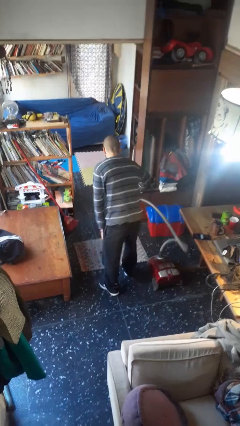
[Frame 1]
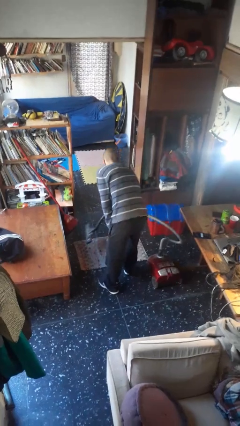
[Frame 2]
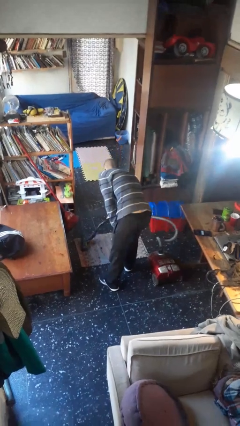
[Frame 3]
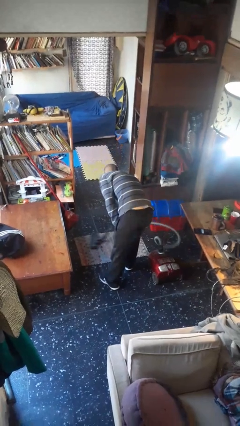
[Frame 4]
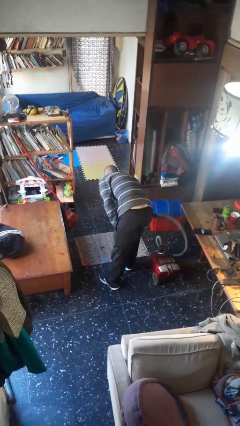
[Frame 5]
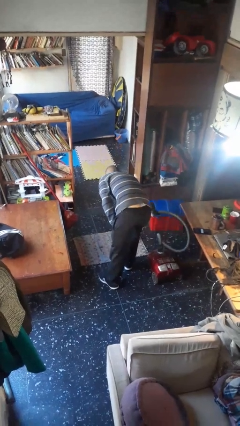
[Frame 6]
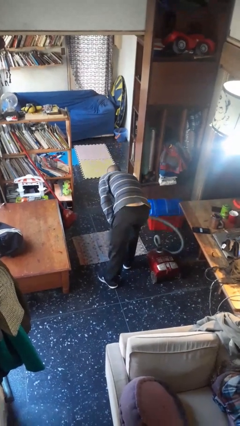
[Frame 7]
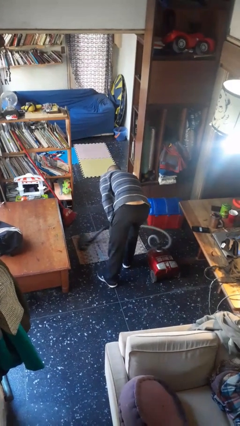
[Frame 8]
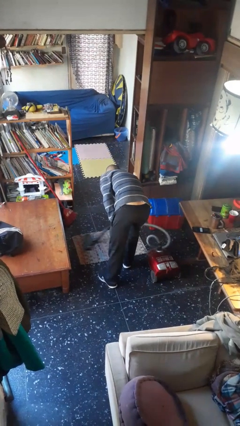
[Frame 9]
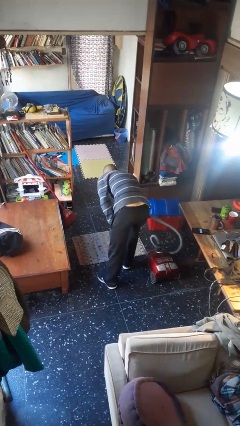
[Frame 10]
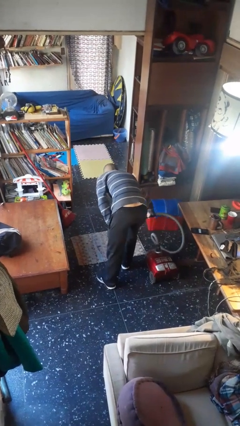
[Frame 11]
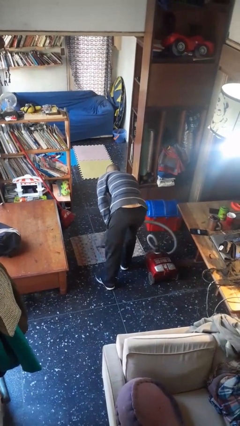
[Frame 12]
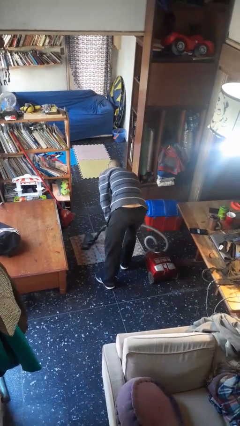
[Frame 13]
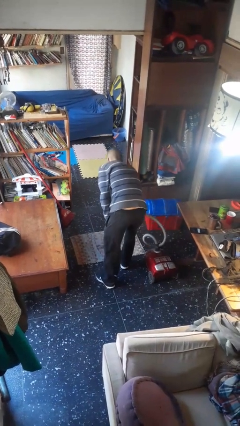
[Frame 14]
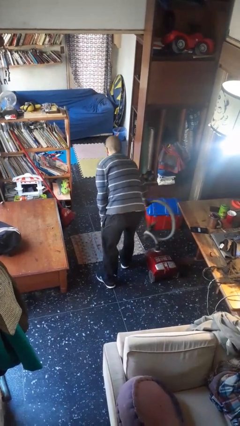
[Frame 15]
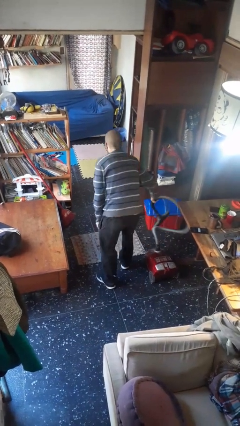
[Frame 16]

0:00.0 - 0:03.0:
person vacuums carpet

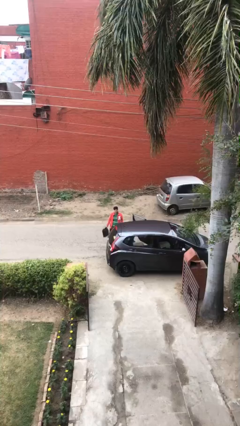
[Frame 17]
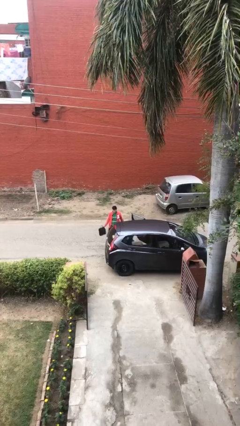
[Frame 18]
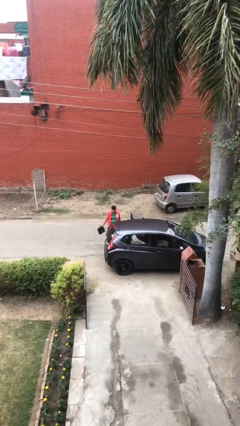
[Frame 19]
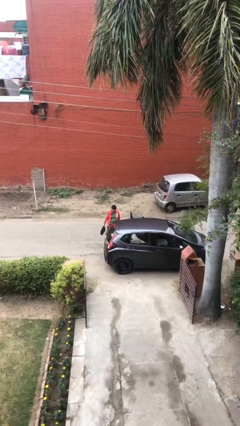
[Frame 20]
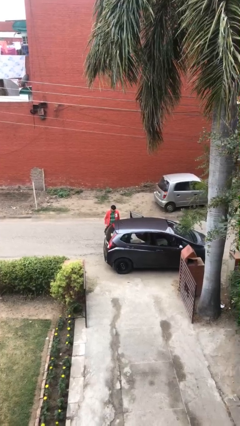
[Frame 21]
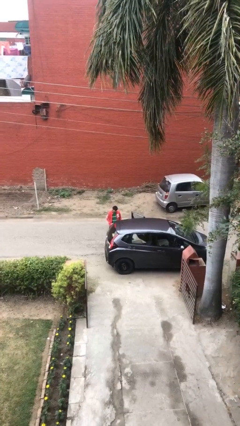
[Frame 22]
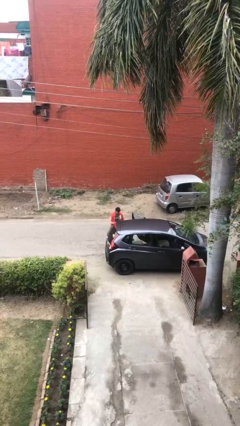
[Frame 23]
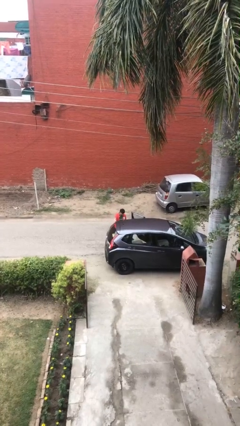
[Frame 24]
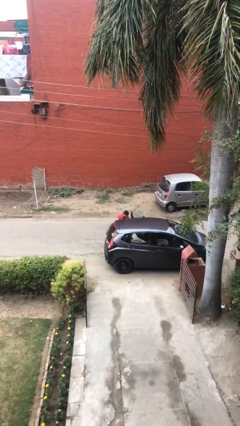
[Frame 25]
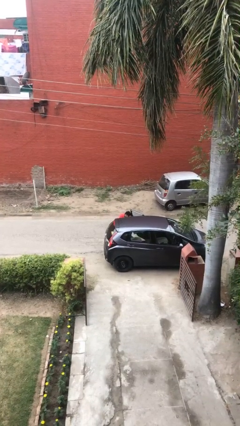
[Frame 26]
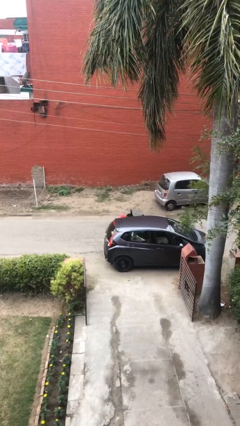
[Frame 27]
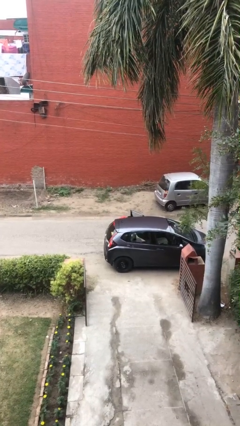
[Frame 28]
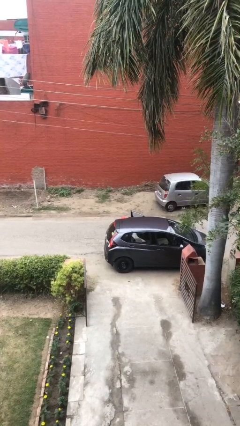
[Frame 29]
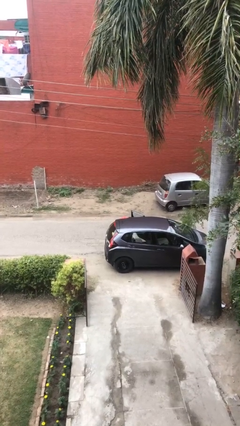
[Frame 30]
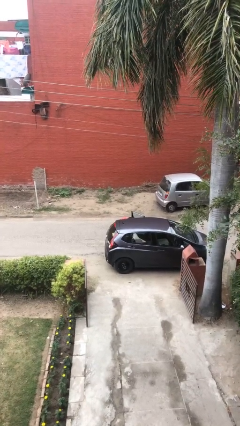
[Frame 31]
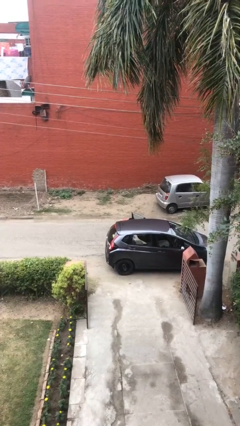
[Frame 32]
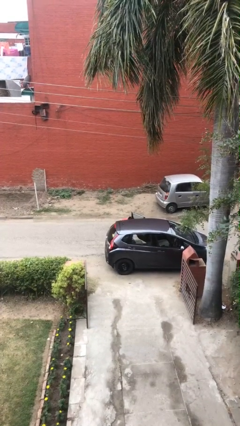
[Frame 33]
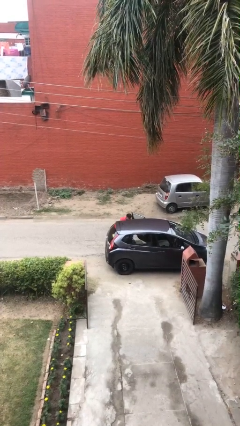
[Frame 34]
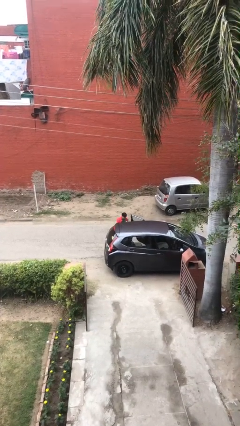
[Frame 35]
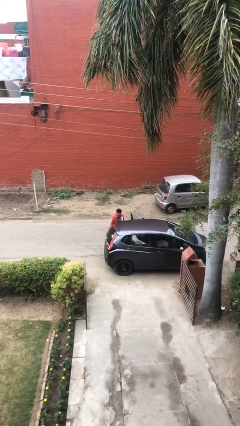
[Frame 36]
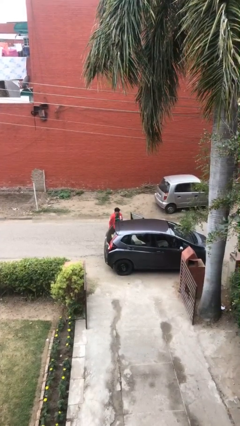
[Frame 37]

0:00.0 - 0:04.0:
person loads car

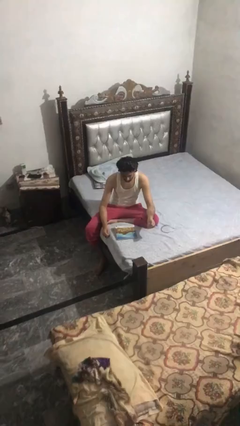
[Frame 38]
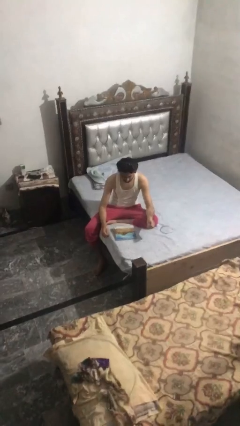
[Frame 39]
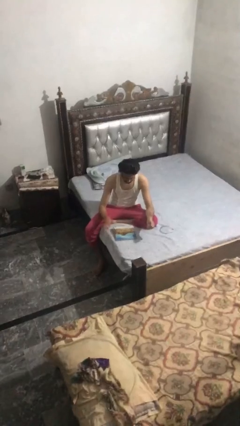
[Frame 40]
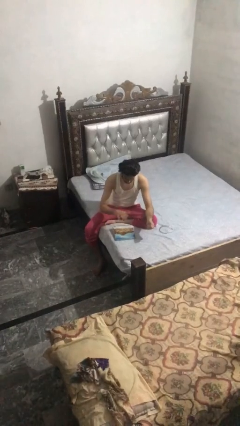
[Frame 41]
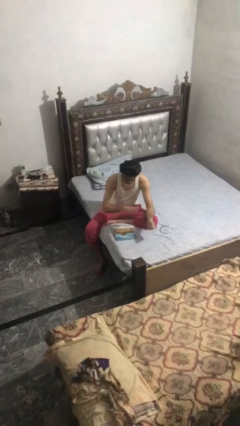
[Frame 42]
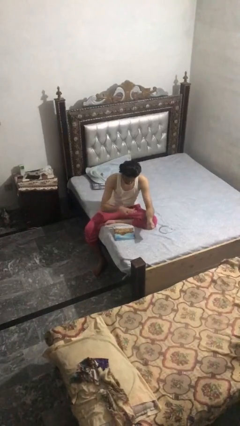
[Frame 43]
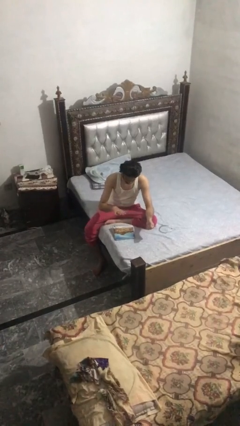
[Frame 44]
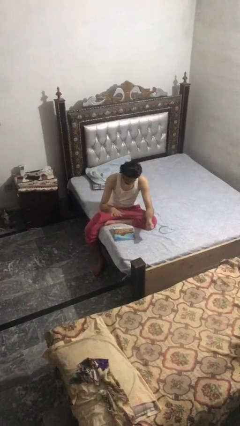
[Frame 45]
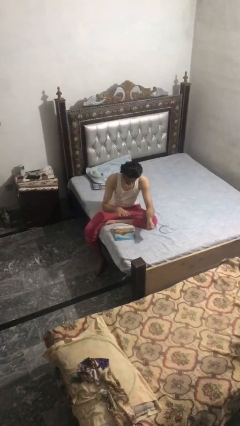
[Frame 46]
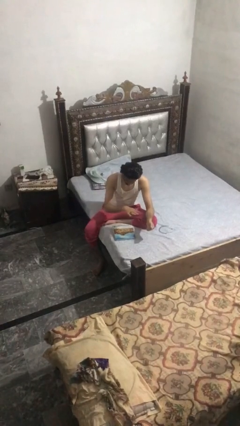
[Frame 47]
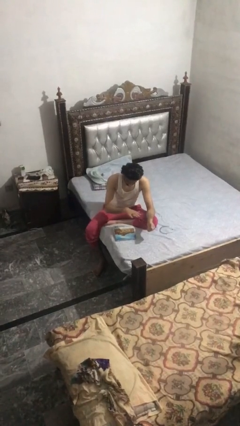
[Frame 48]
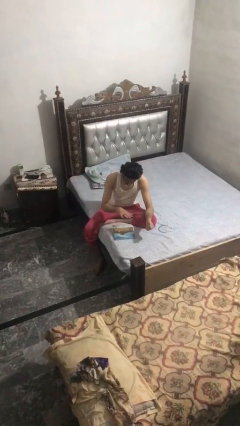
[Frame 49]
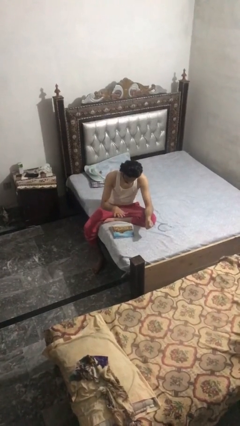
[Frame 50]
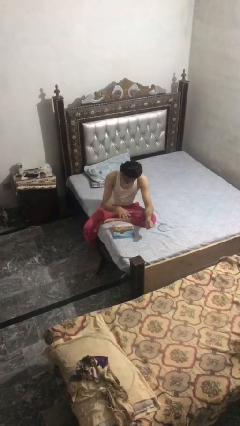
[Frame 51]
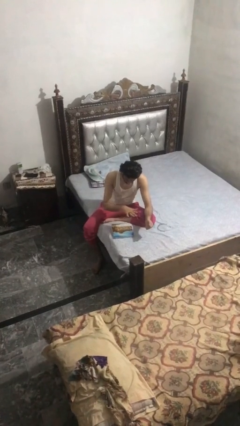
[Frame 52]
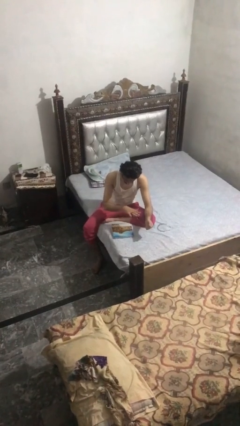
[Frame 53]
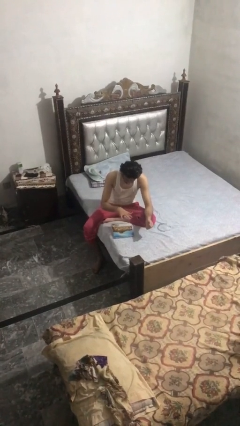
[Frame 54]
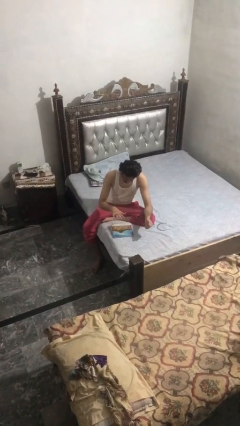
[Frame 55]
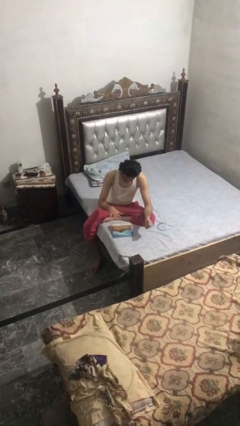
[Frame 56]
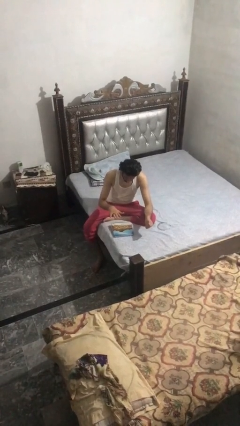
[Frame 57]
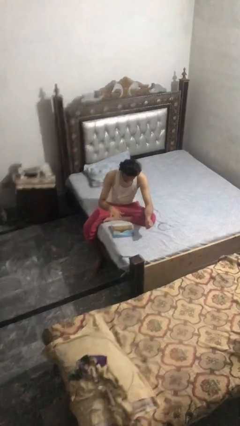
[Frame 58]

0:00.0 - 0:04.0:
person waves hand over object

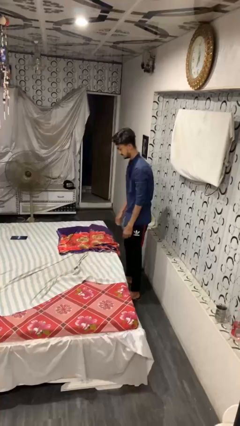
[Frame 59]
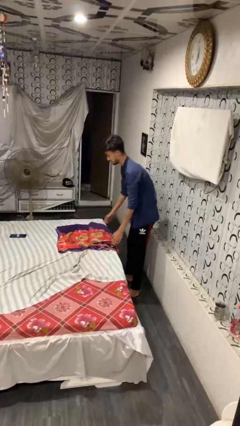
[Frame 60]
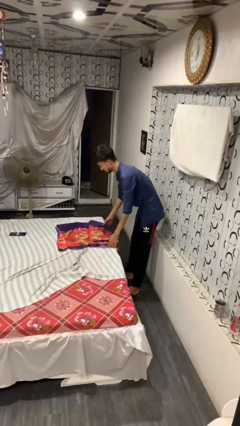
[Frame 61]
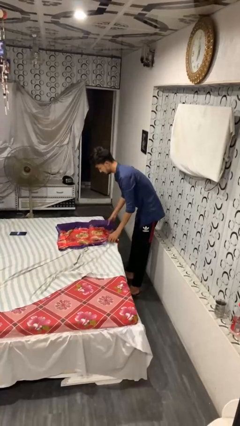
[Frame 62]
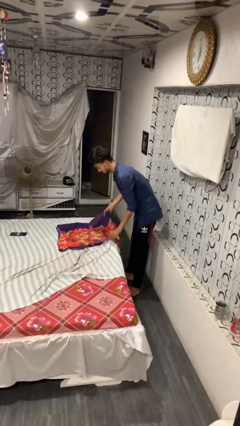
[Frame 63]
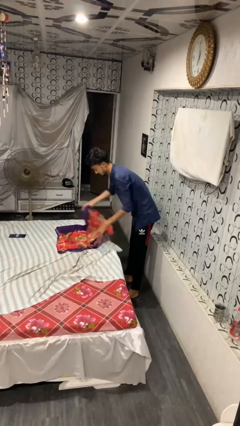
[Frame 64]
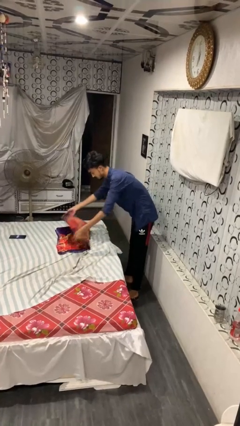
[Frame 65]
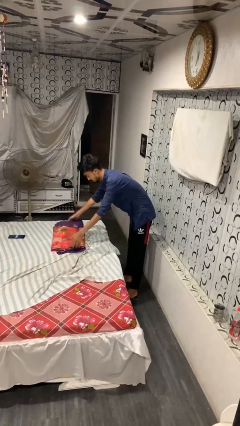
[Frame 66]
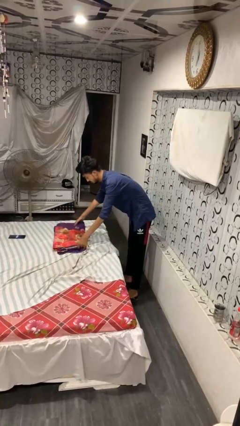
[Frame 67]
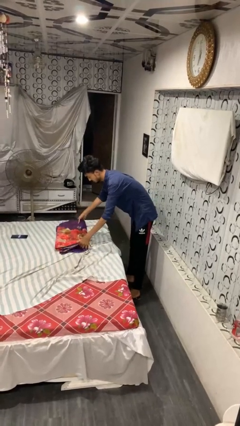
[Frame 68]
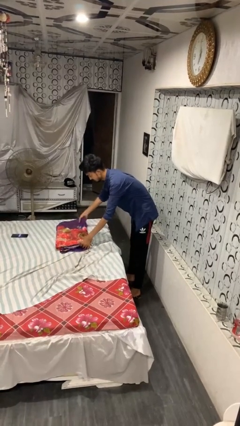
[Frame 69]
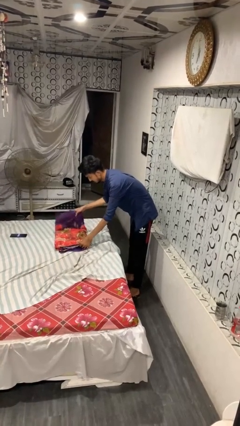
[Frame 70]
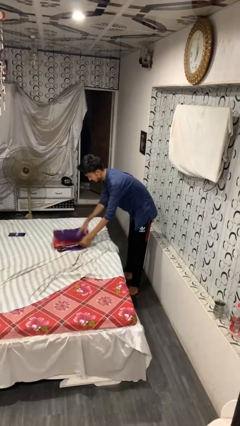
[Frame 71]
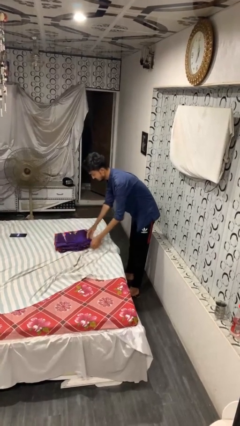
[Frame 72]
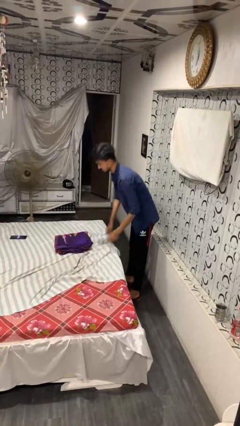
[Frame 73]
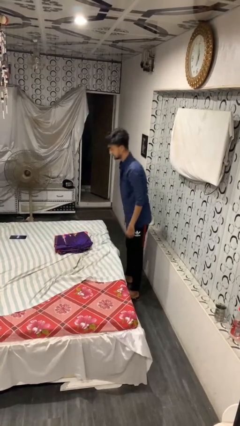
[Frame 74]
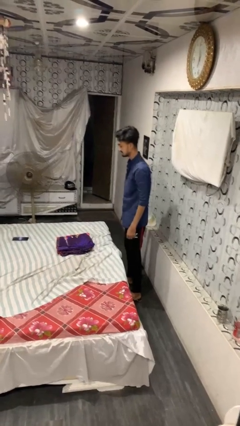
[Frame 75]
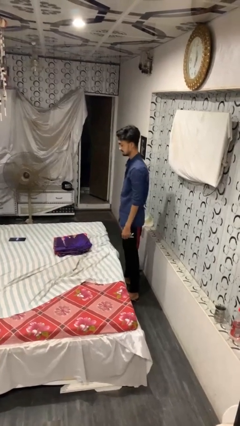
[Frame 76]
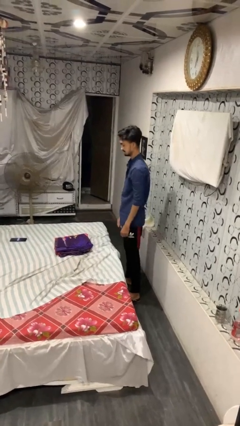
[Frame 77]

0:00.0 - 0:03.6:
person folds blanket

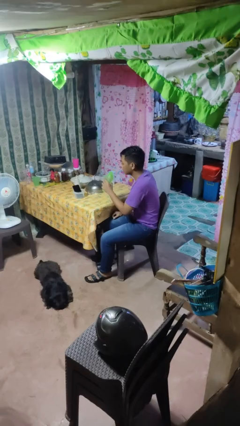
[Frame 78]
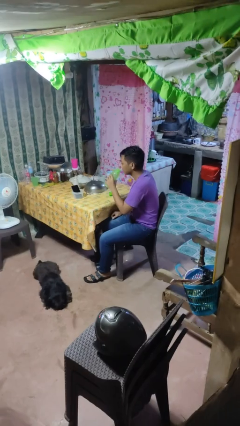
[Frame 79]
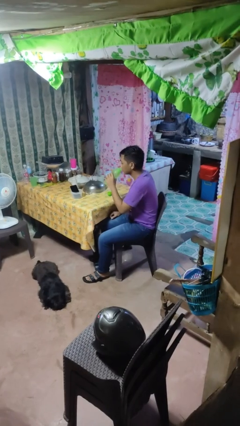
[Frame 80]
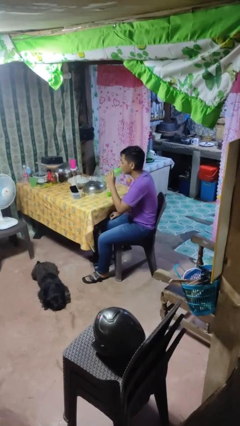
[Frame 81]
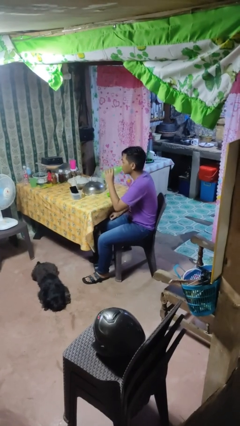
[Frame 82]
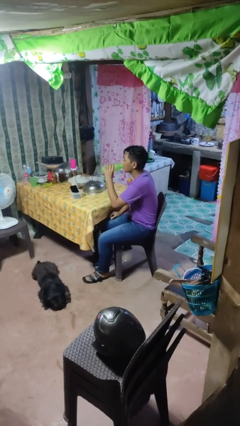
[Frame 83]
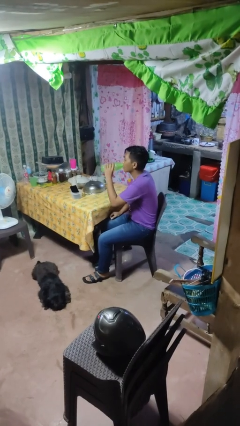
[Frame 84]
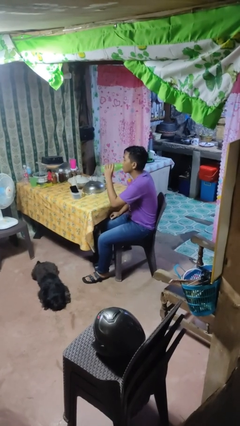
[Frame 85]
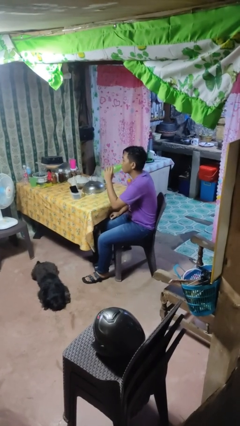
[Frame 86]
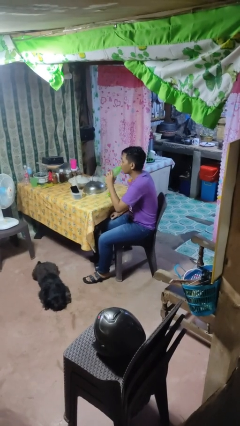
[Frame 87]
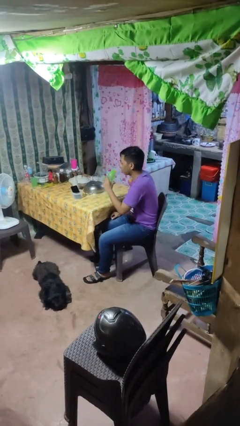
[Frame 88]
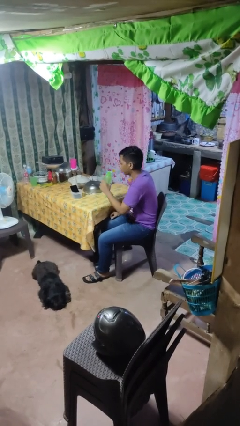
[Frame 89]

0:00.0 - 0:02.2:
person drinks from bottle

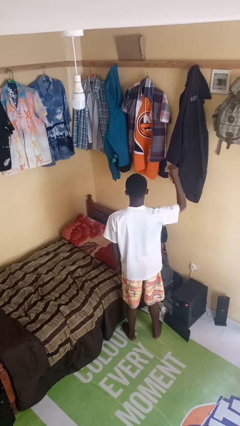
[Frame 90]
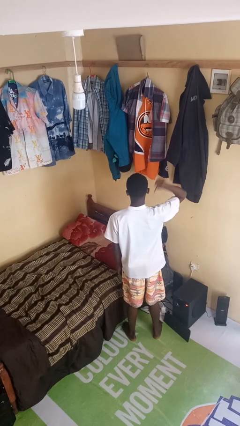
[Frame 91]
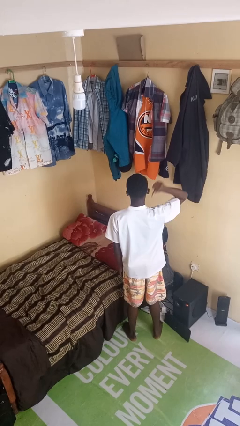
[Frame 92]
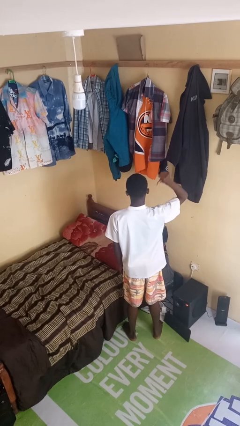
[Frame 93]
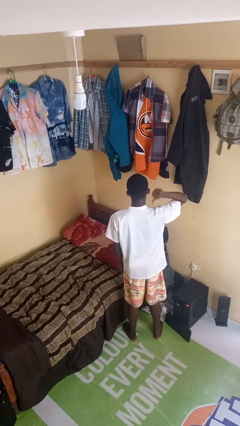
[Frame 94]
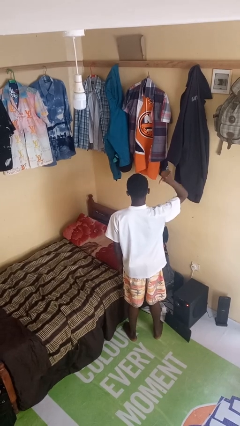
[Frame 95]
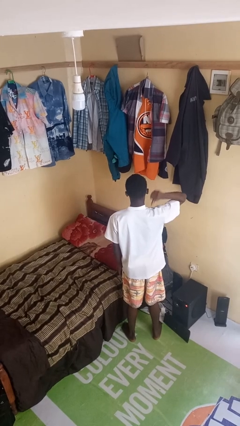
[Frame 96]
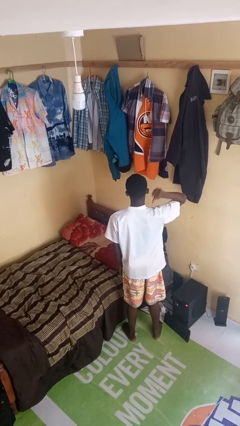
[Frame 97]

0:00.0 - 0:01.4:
person gestures behind me
